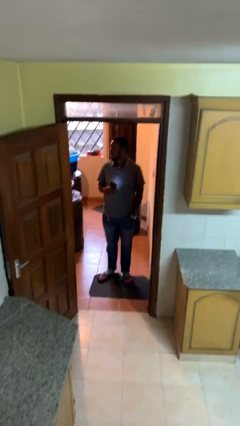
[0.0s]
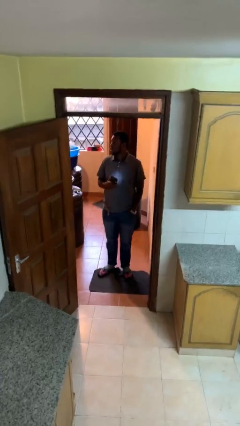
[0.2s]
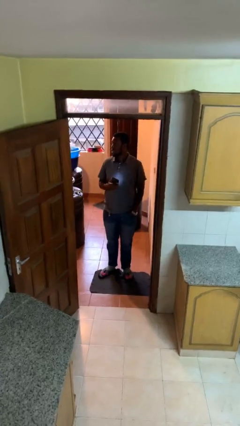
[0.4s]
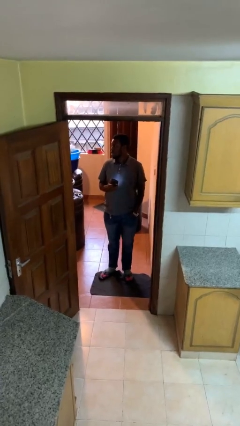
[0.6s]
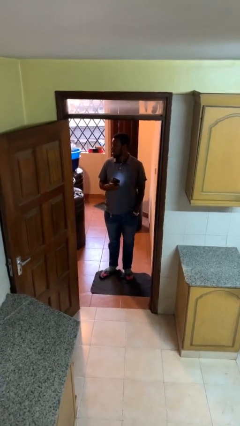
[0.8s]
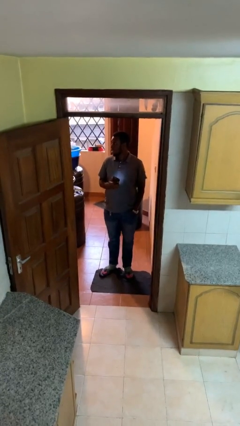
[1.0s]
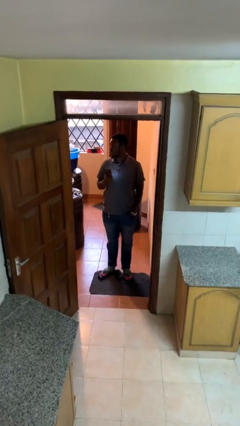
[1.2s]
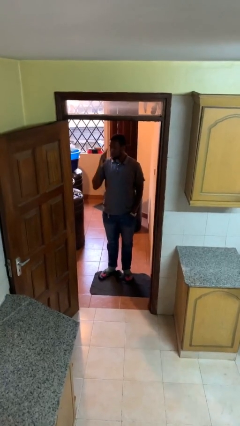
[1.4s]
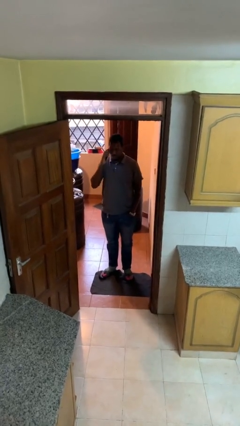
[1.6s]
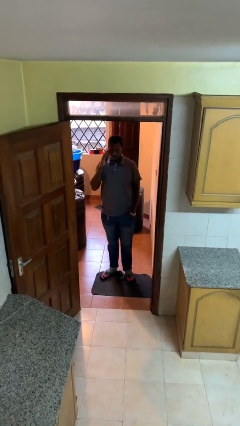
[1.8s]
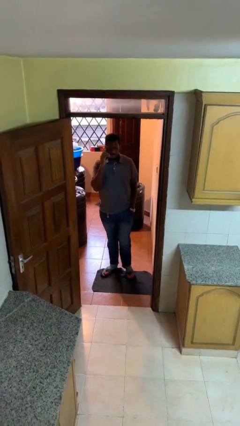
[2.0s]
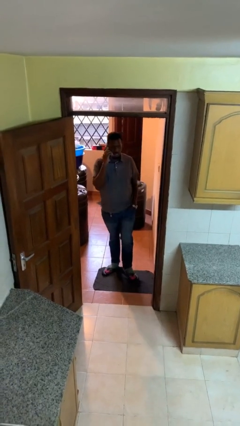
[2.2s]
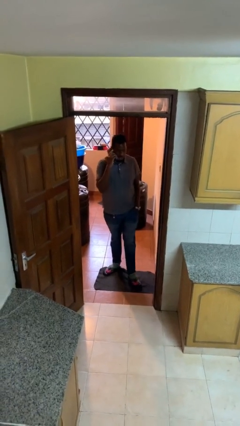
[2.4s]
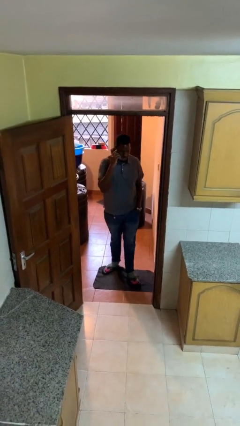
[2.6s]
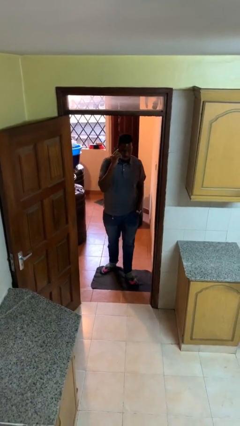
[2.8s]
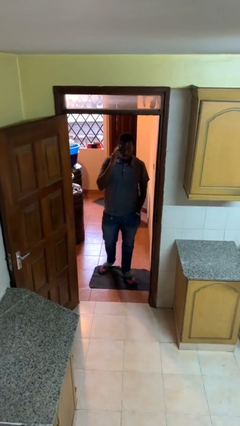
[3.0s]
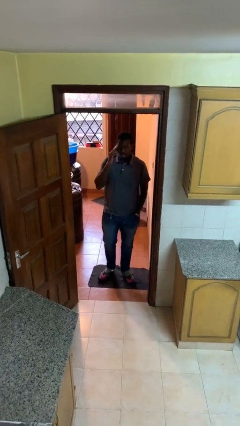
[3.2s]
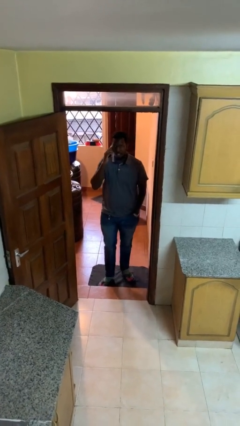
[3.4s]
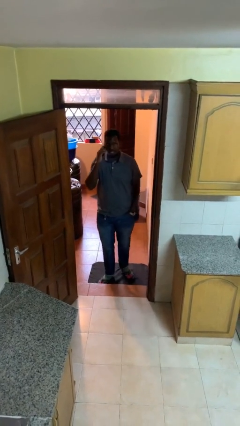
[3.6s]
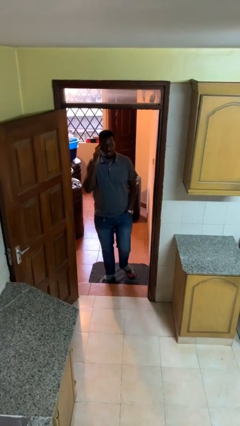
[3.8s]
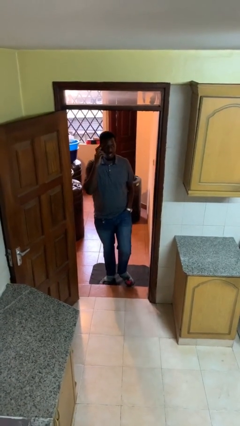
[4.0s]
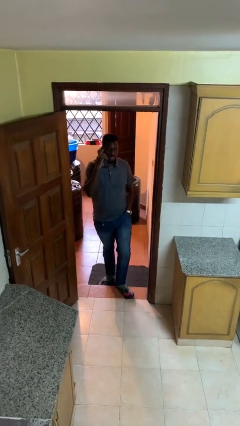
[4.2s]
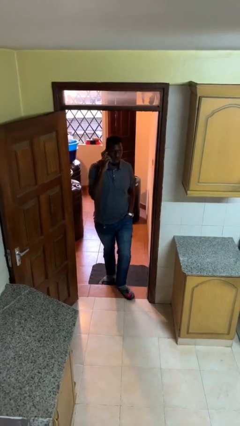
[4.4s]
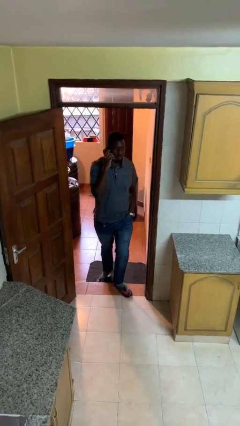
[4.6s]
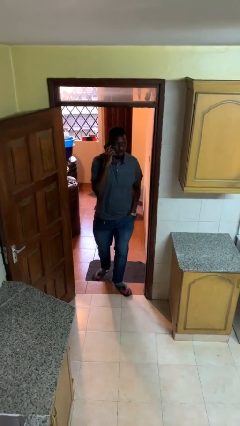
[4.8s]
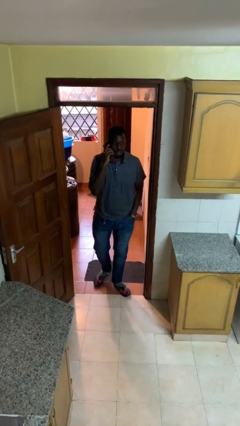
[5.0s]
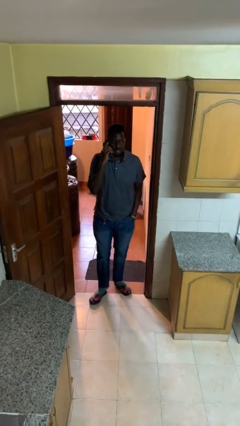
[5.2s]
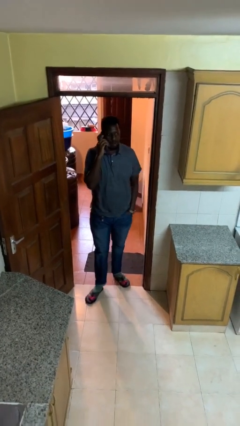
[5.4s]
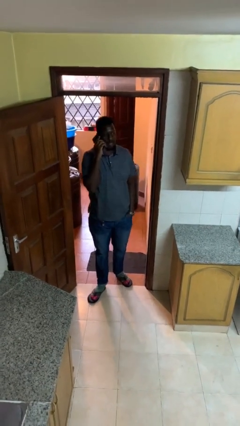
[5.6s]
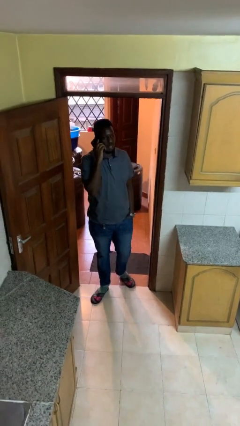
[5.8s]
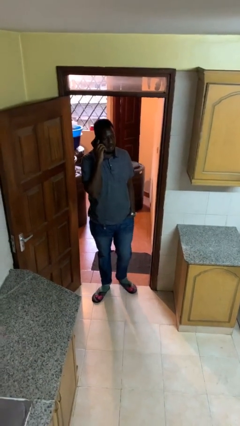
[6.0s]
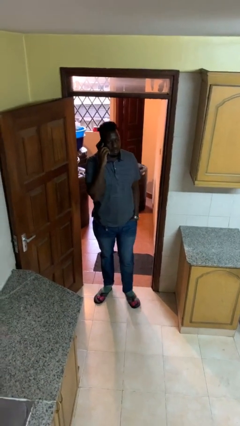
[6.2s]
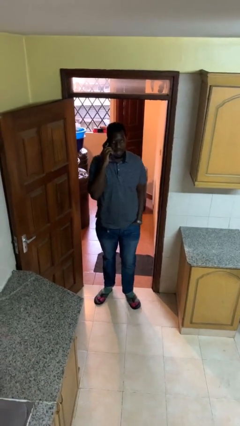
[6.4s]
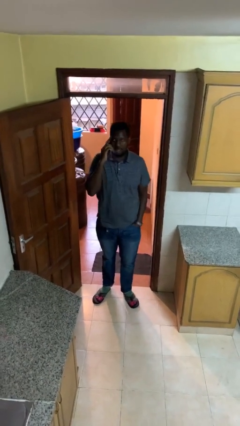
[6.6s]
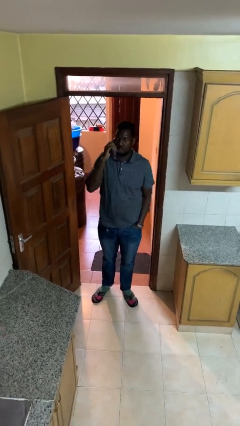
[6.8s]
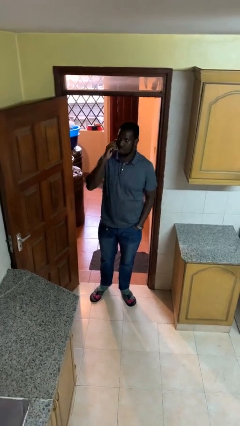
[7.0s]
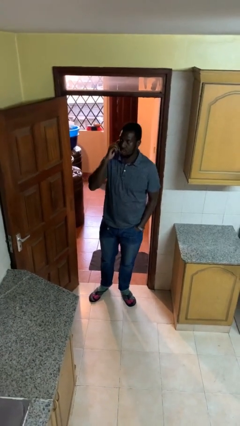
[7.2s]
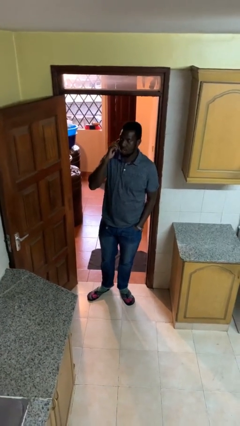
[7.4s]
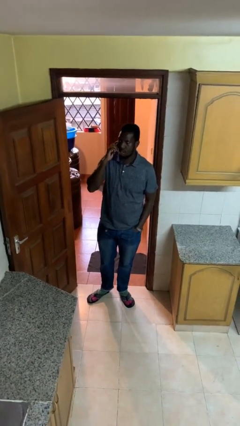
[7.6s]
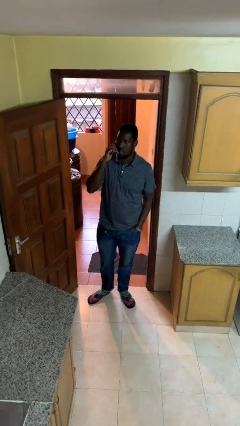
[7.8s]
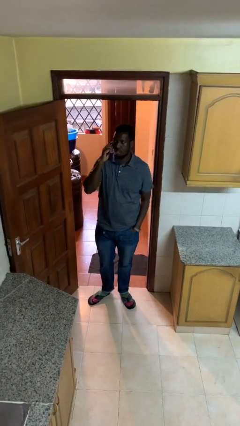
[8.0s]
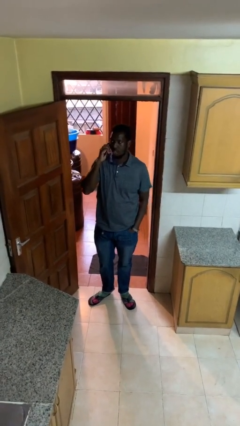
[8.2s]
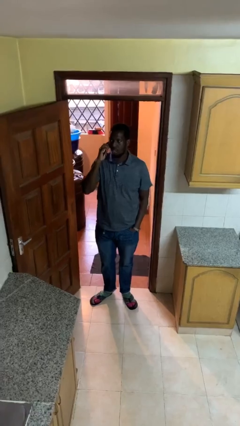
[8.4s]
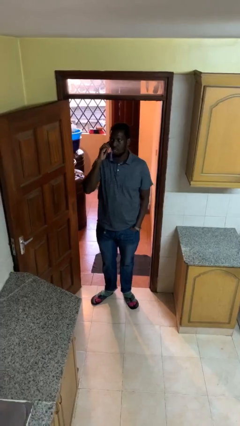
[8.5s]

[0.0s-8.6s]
person enters scene through structure

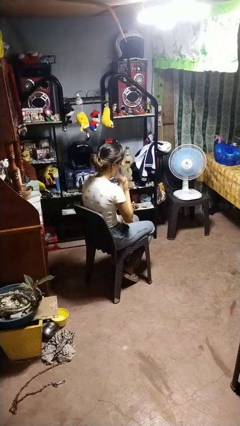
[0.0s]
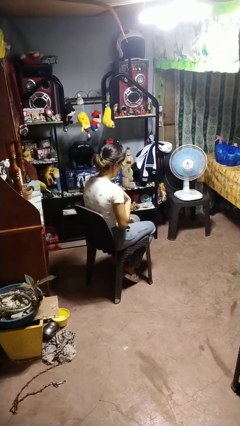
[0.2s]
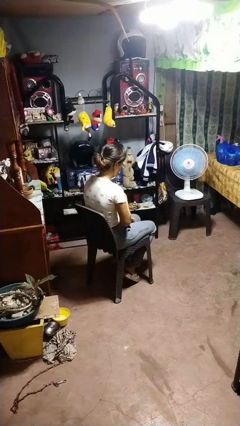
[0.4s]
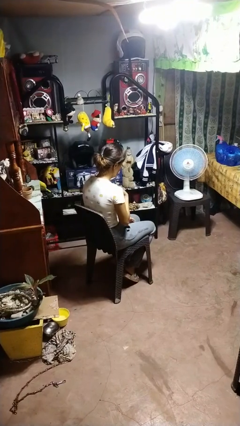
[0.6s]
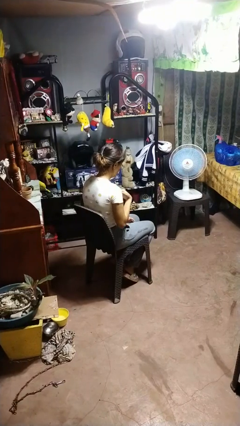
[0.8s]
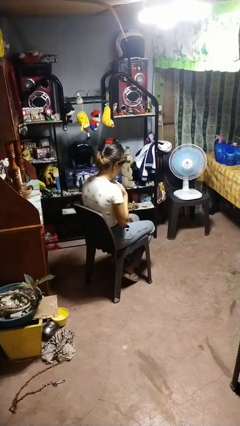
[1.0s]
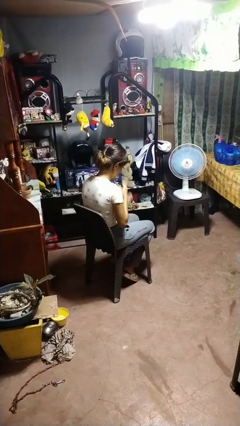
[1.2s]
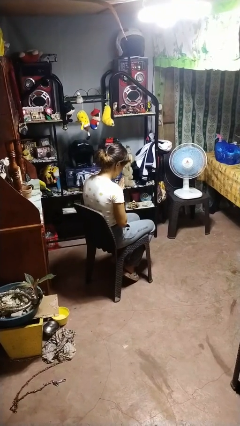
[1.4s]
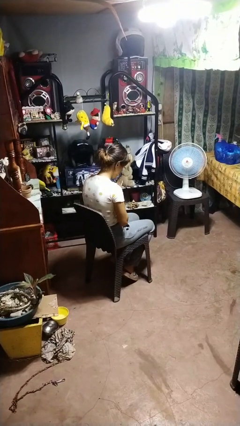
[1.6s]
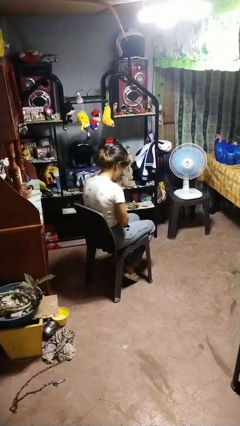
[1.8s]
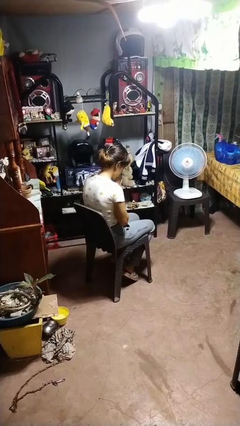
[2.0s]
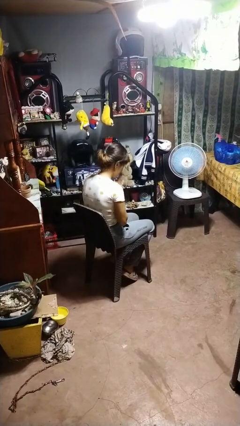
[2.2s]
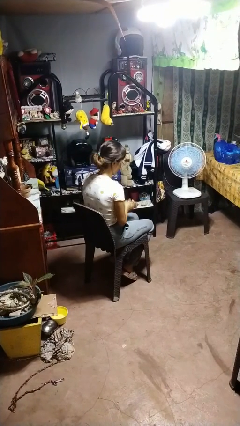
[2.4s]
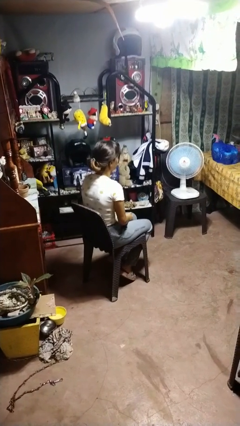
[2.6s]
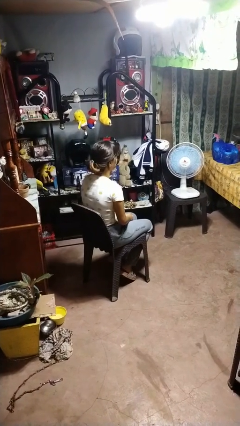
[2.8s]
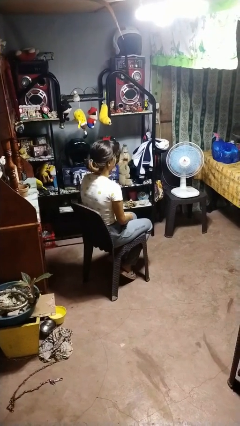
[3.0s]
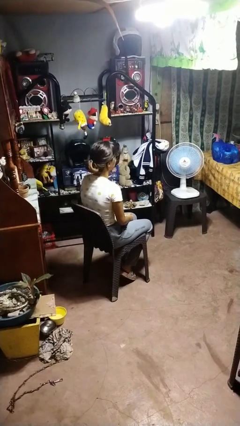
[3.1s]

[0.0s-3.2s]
person prays

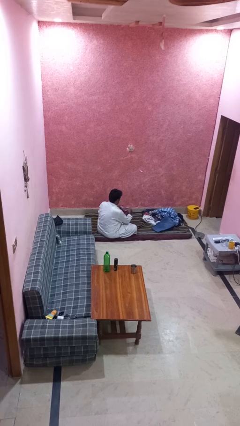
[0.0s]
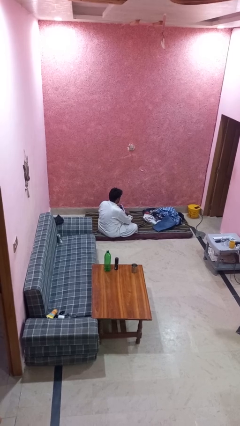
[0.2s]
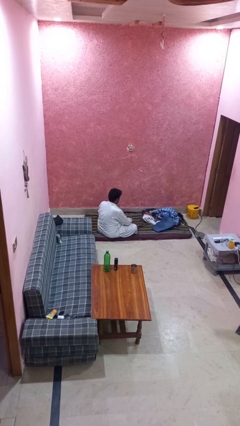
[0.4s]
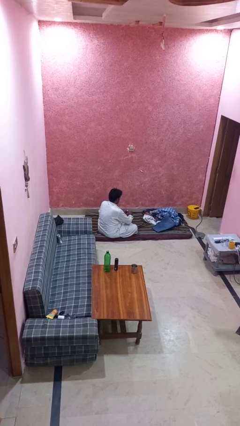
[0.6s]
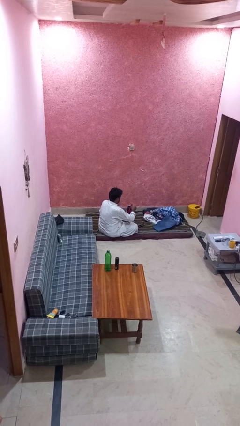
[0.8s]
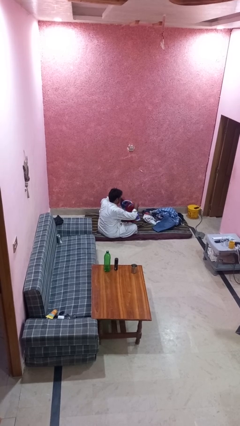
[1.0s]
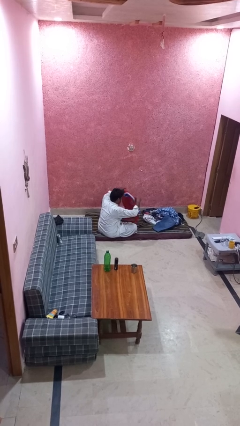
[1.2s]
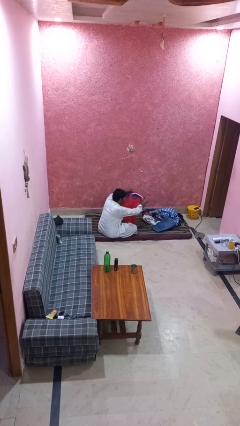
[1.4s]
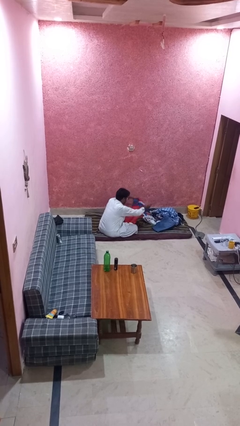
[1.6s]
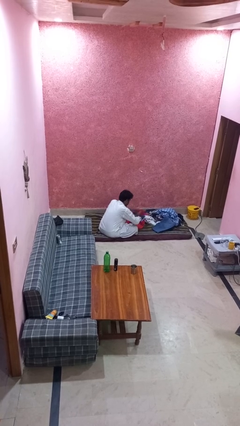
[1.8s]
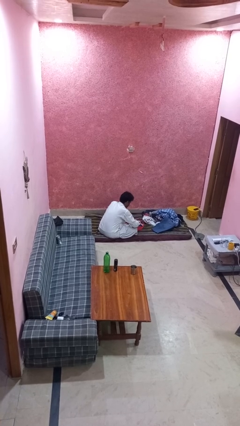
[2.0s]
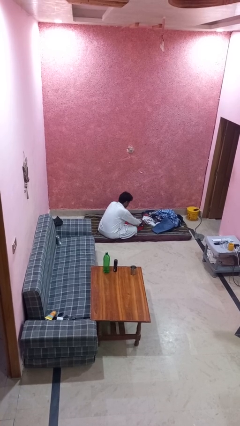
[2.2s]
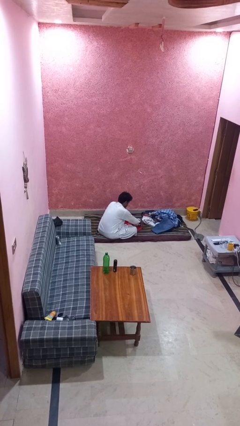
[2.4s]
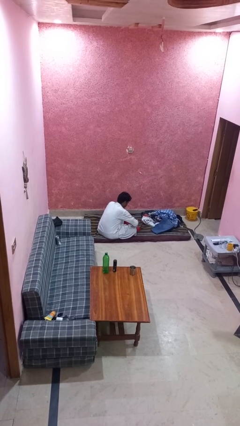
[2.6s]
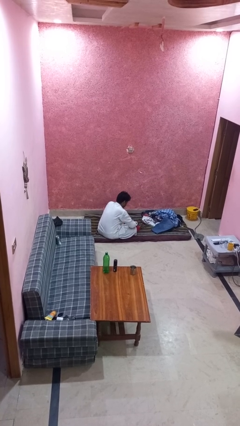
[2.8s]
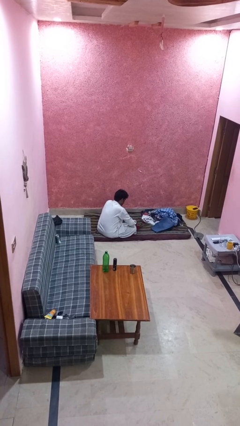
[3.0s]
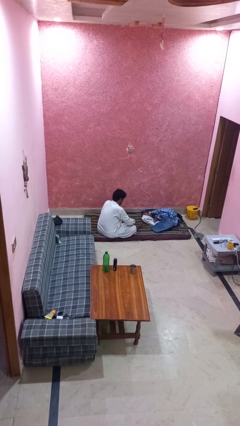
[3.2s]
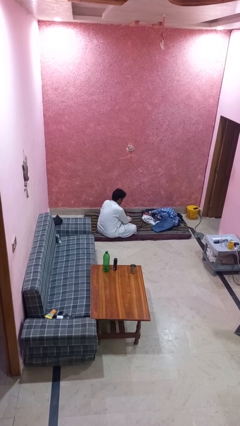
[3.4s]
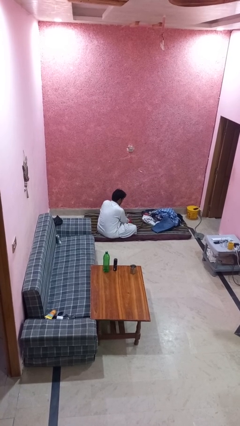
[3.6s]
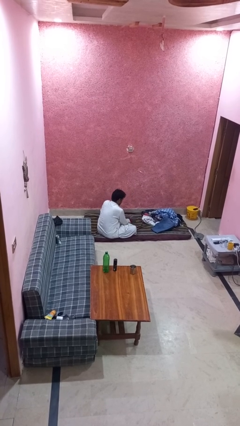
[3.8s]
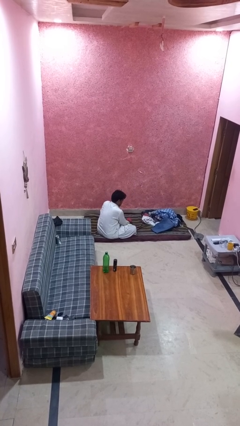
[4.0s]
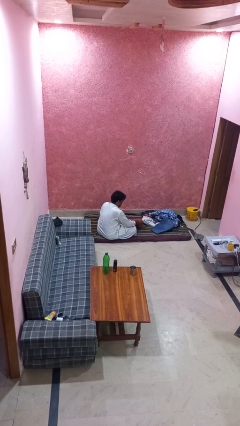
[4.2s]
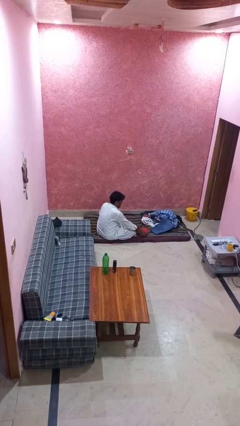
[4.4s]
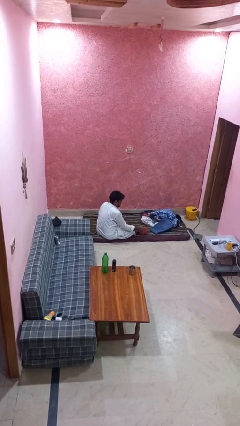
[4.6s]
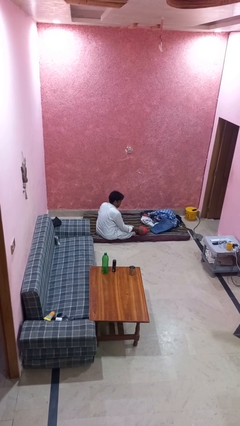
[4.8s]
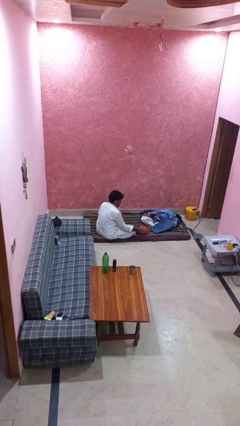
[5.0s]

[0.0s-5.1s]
person folds shirt

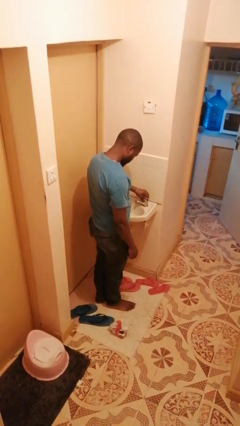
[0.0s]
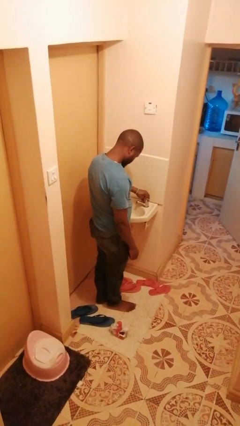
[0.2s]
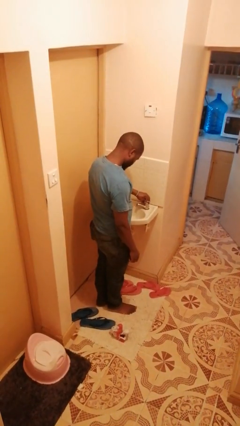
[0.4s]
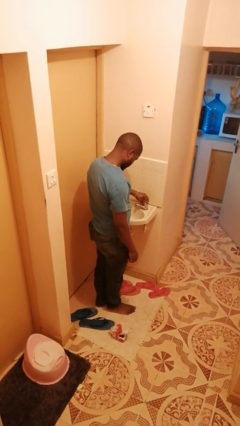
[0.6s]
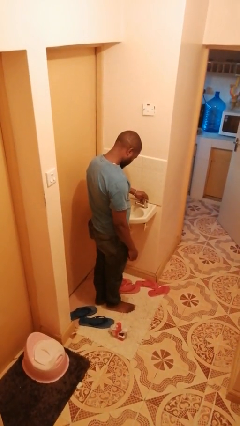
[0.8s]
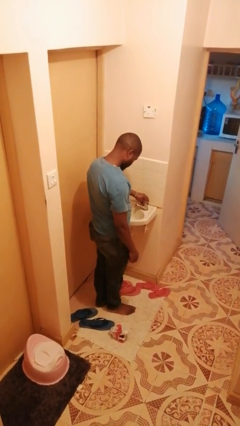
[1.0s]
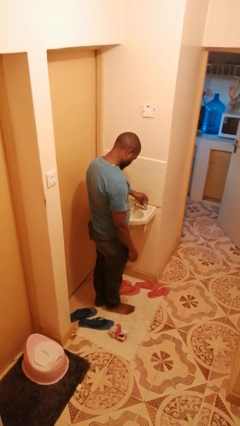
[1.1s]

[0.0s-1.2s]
person turns off faucet
